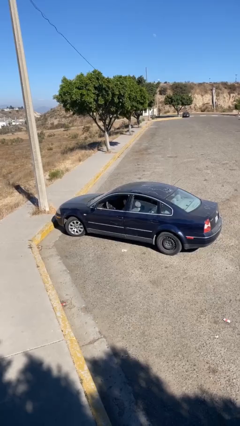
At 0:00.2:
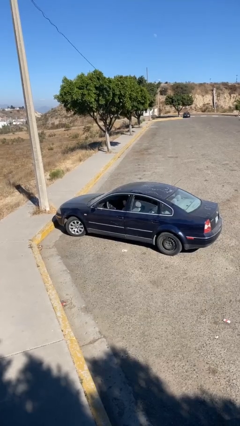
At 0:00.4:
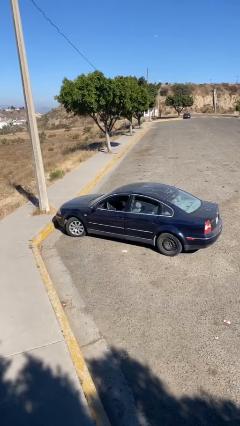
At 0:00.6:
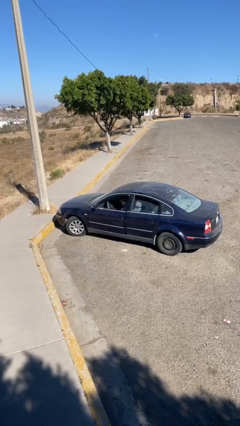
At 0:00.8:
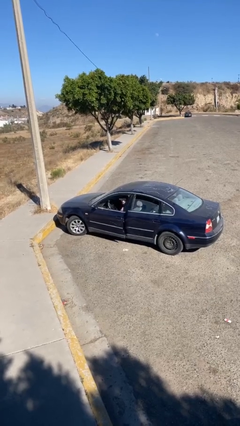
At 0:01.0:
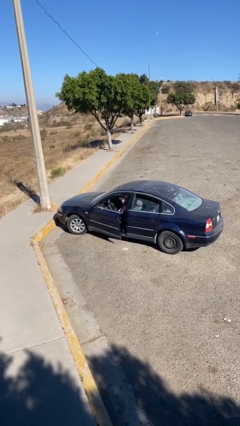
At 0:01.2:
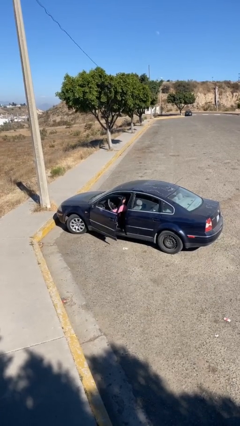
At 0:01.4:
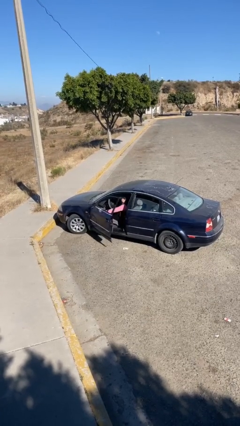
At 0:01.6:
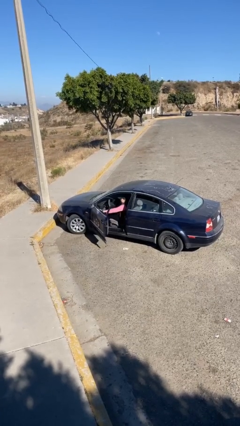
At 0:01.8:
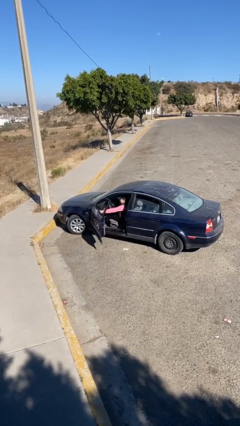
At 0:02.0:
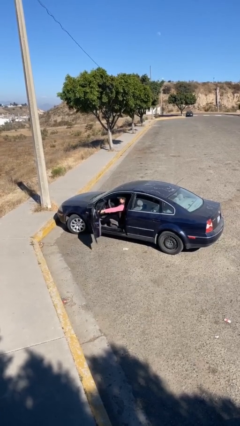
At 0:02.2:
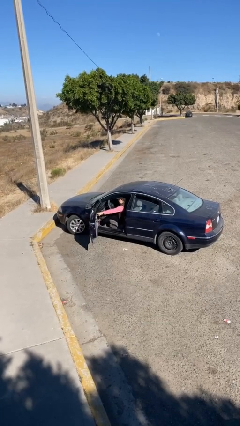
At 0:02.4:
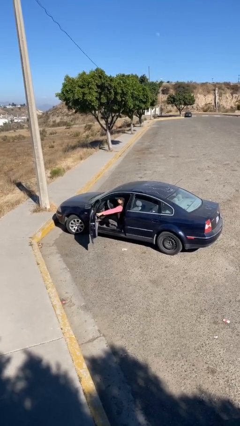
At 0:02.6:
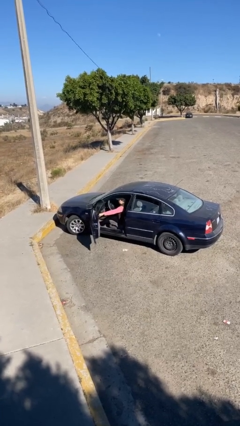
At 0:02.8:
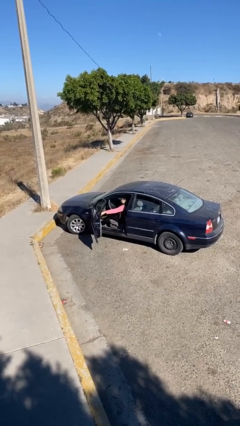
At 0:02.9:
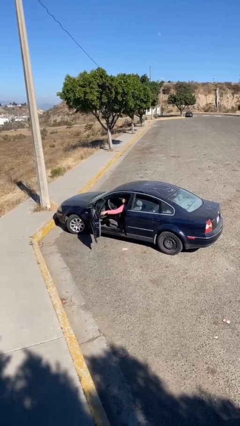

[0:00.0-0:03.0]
person opens car door

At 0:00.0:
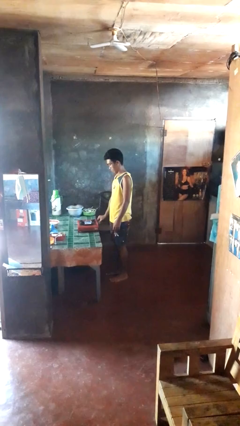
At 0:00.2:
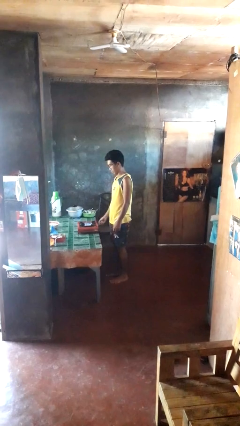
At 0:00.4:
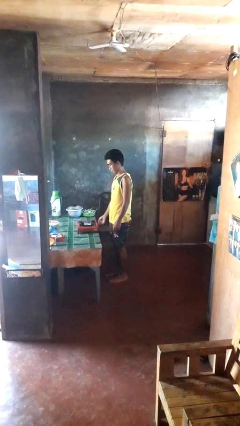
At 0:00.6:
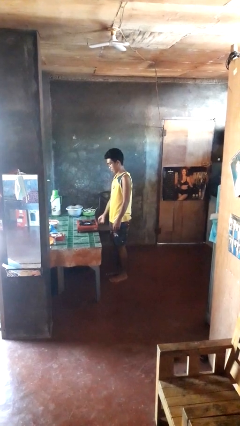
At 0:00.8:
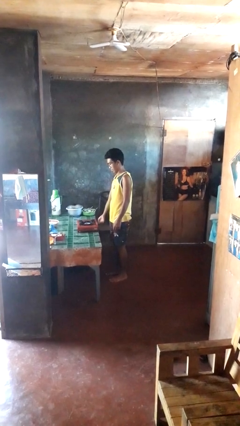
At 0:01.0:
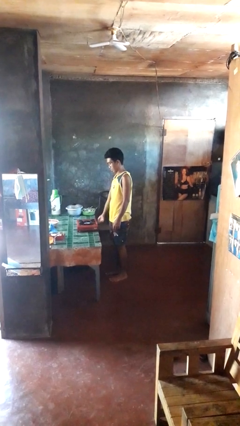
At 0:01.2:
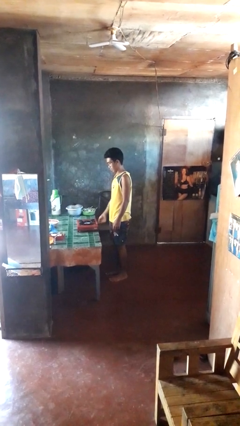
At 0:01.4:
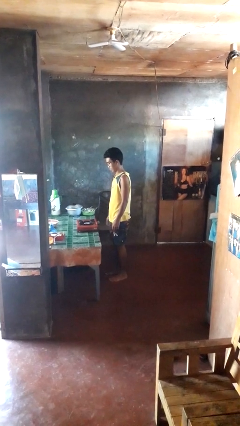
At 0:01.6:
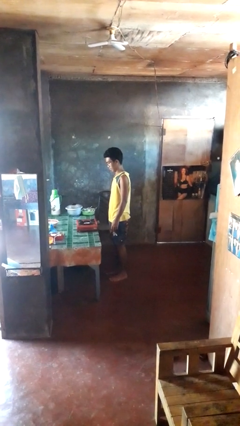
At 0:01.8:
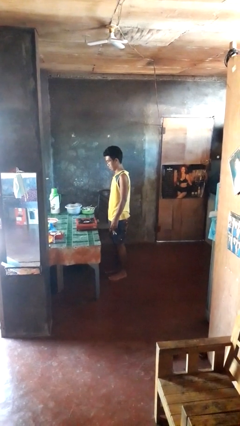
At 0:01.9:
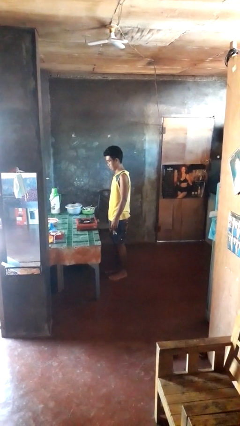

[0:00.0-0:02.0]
person turns off stovetop

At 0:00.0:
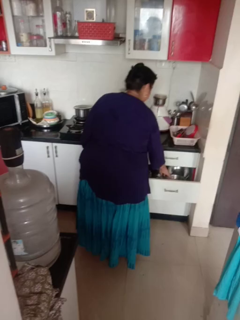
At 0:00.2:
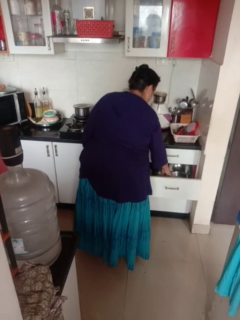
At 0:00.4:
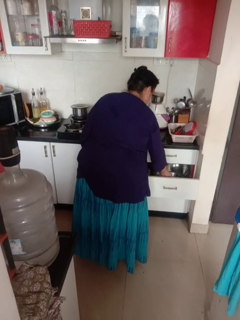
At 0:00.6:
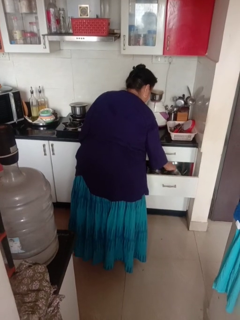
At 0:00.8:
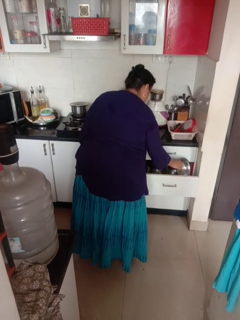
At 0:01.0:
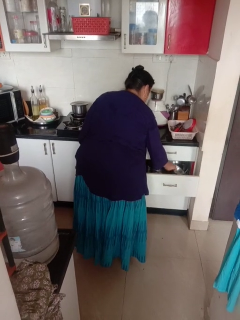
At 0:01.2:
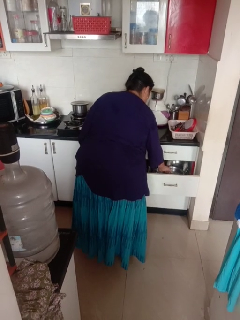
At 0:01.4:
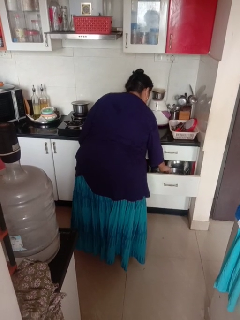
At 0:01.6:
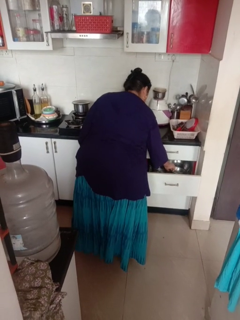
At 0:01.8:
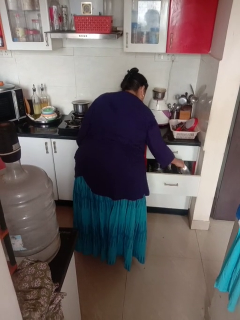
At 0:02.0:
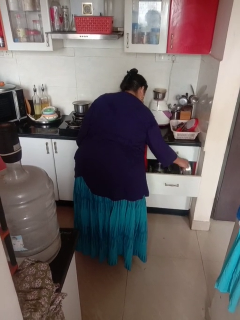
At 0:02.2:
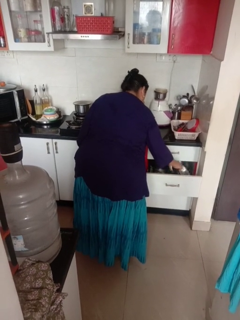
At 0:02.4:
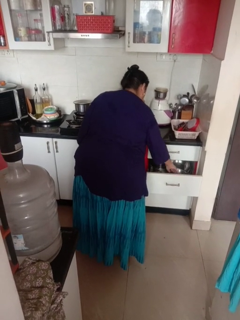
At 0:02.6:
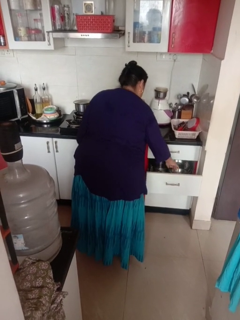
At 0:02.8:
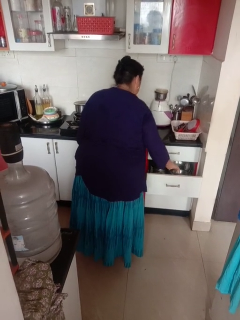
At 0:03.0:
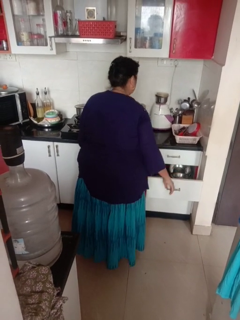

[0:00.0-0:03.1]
person searches in kitchen drawer

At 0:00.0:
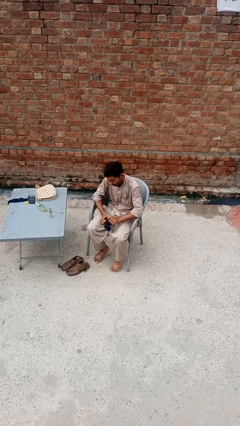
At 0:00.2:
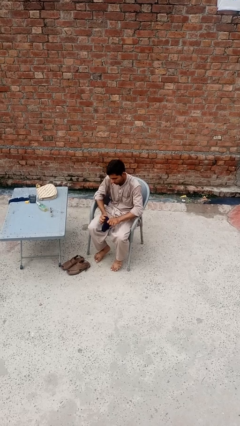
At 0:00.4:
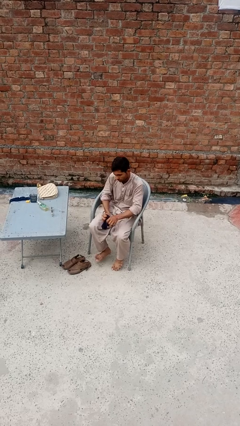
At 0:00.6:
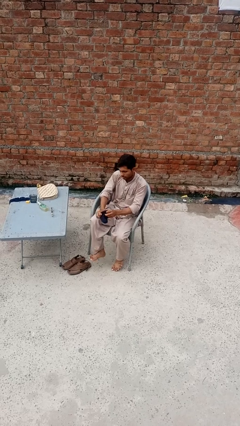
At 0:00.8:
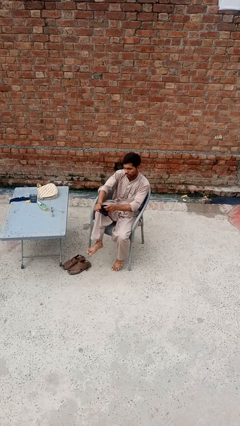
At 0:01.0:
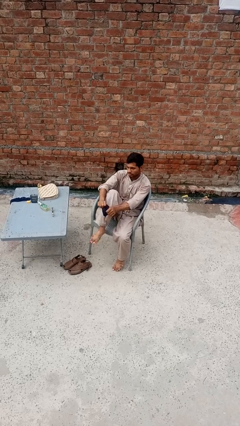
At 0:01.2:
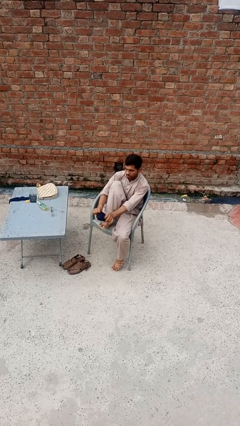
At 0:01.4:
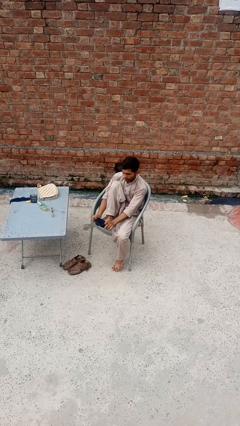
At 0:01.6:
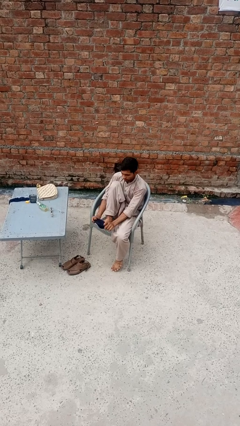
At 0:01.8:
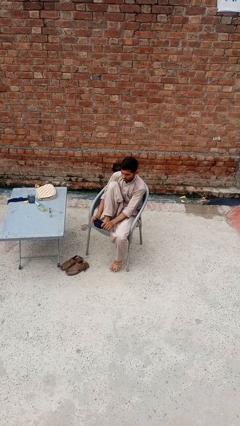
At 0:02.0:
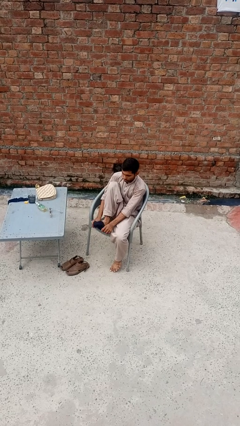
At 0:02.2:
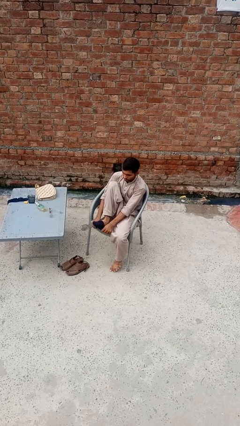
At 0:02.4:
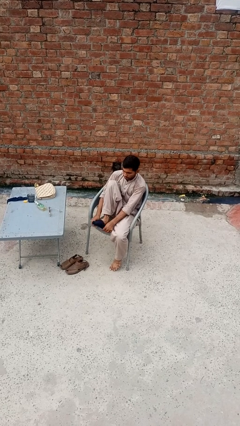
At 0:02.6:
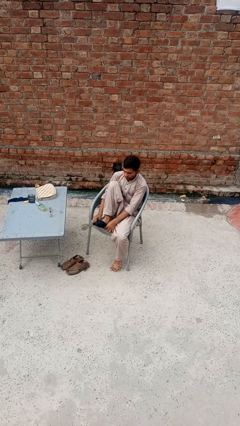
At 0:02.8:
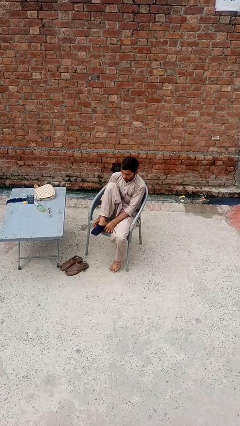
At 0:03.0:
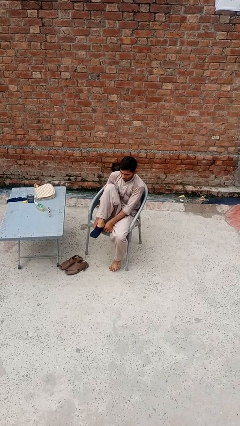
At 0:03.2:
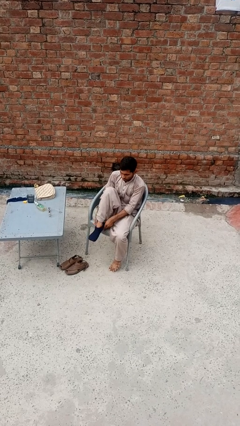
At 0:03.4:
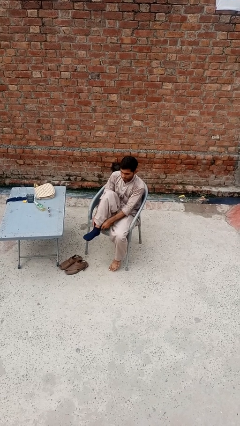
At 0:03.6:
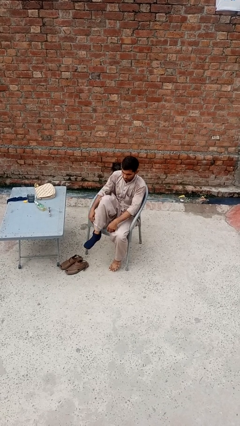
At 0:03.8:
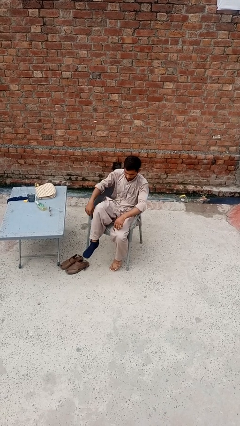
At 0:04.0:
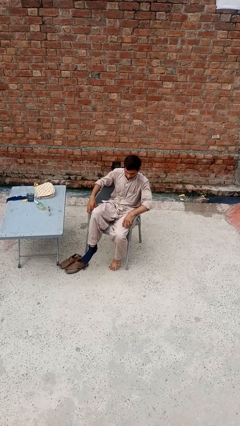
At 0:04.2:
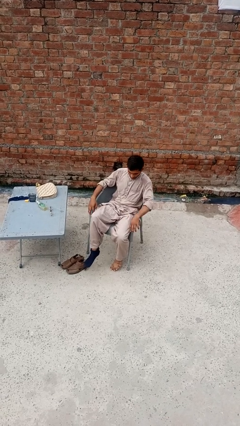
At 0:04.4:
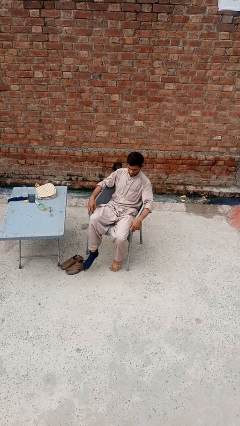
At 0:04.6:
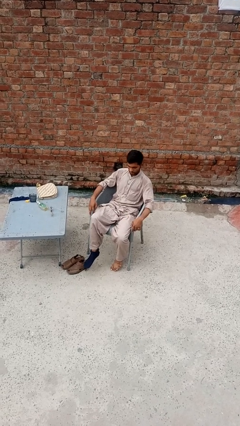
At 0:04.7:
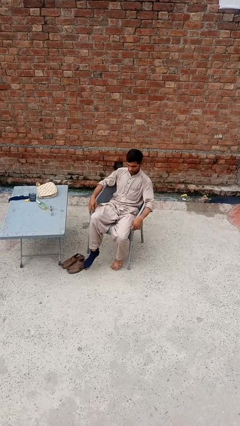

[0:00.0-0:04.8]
person puts on socks

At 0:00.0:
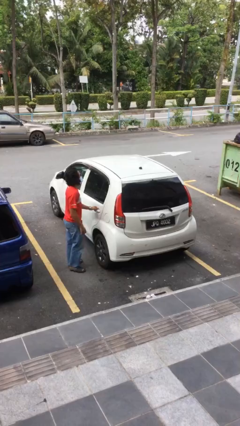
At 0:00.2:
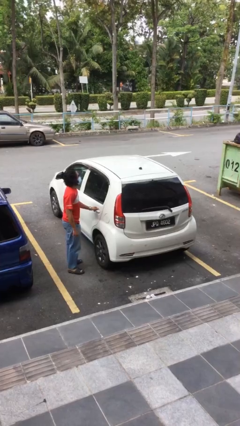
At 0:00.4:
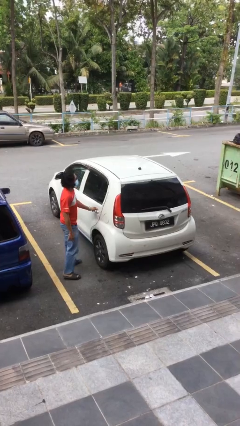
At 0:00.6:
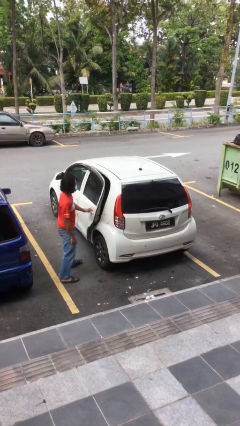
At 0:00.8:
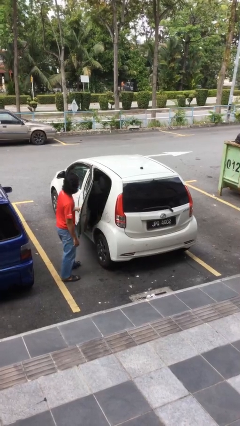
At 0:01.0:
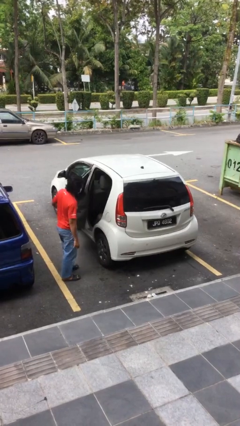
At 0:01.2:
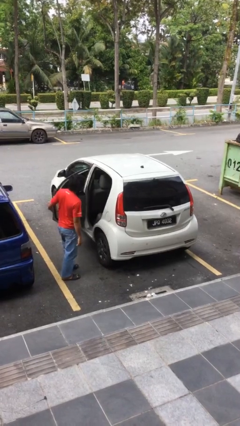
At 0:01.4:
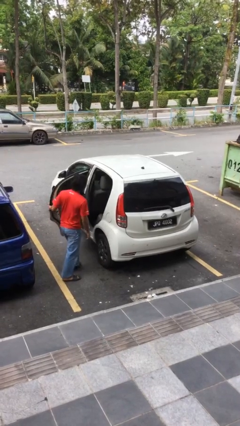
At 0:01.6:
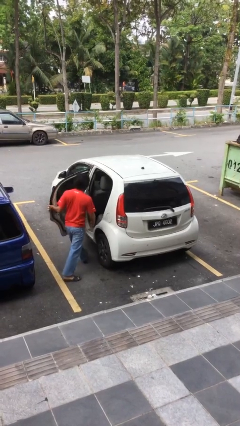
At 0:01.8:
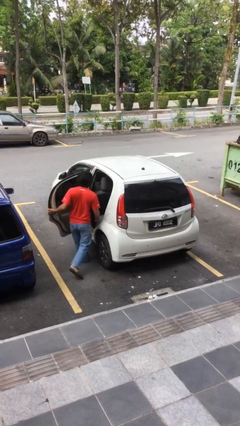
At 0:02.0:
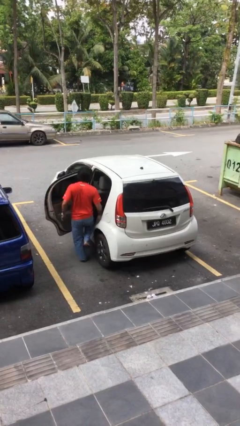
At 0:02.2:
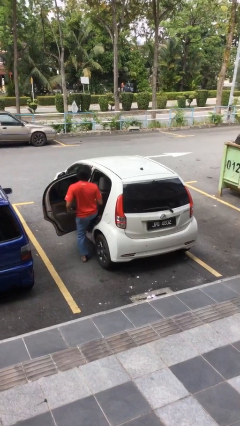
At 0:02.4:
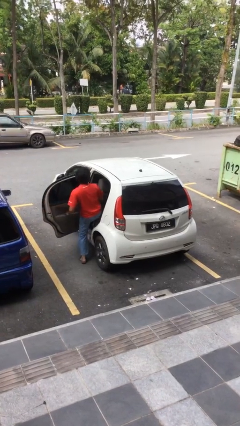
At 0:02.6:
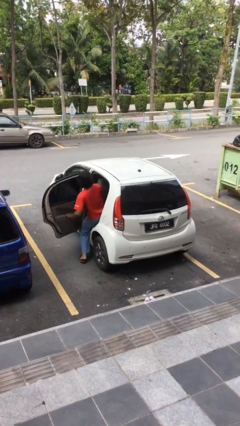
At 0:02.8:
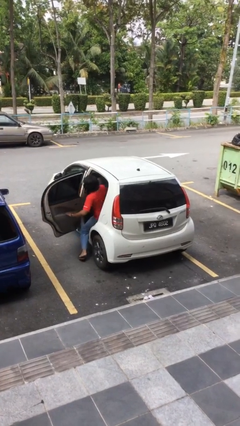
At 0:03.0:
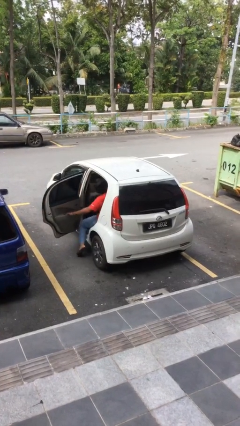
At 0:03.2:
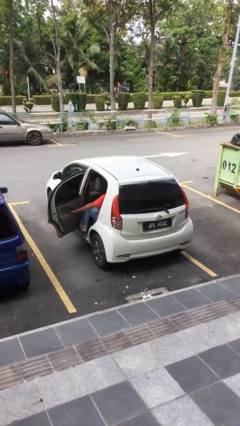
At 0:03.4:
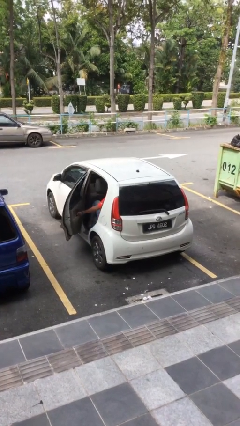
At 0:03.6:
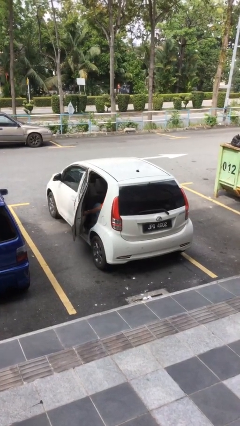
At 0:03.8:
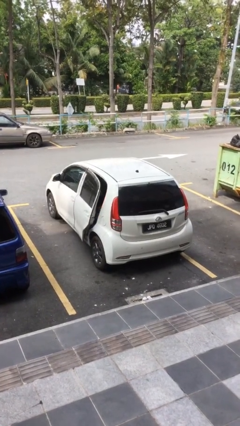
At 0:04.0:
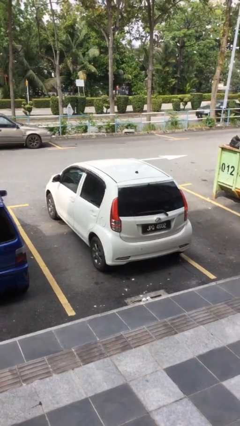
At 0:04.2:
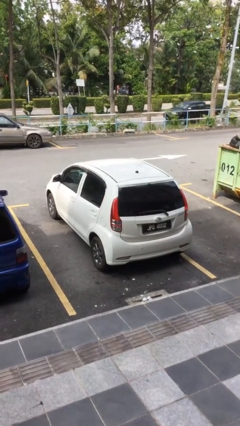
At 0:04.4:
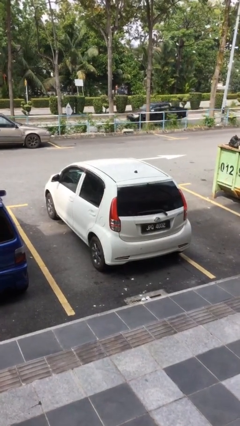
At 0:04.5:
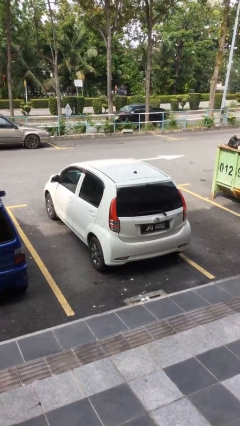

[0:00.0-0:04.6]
car picks up person

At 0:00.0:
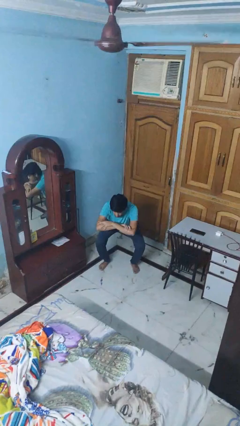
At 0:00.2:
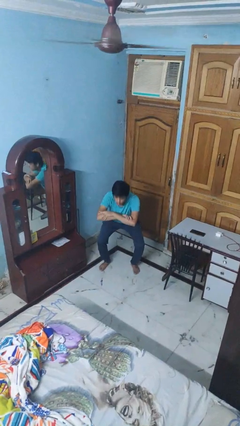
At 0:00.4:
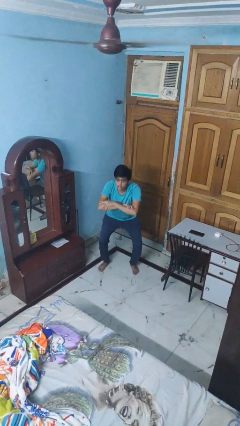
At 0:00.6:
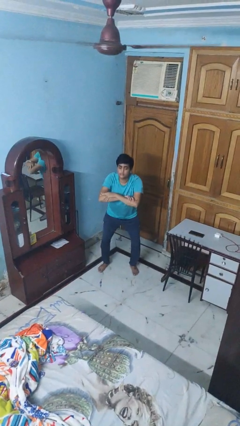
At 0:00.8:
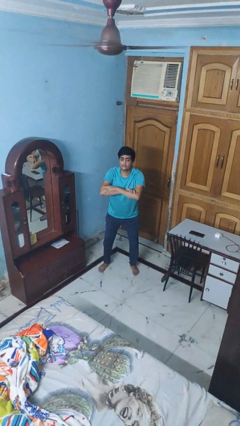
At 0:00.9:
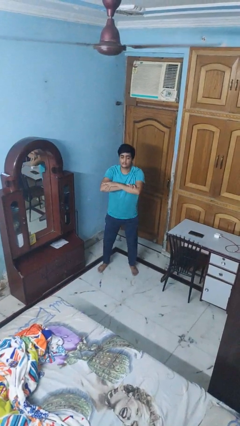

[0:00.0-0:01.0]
person stands up
